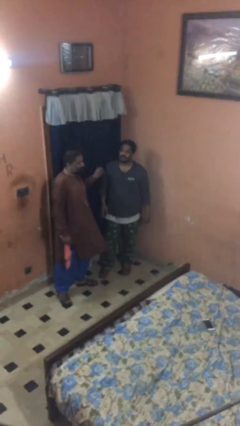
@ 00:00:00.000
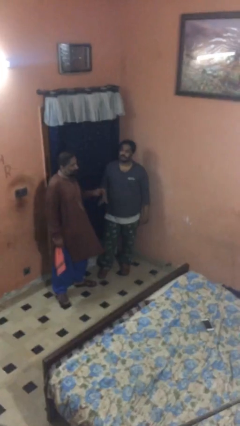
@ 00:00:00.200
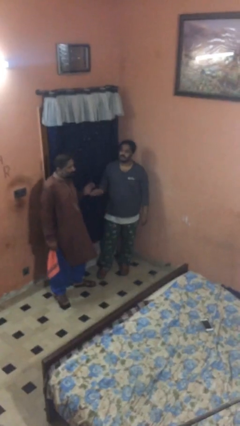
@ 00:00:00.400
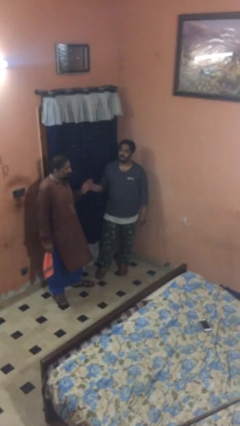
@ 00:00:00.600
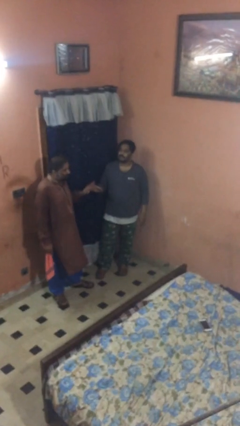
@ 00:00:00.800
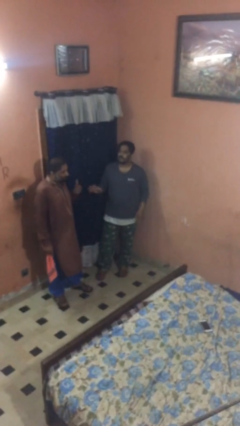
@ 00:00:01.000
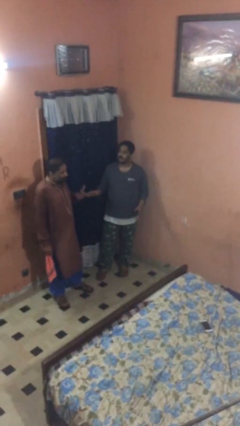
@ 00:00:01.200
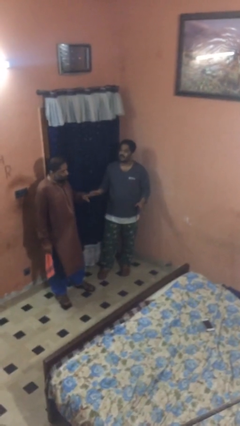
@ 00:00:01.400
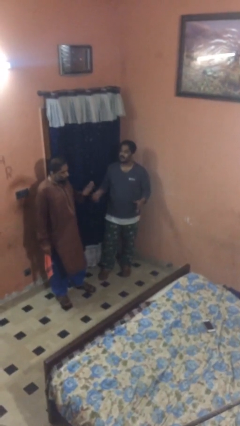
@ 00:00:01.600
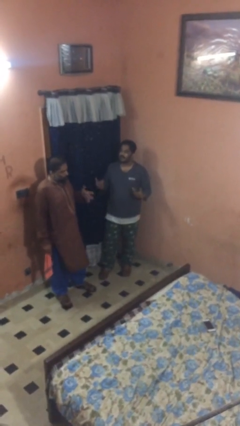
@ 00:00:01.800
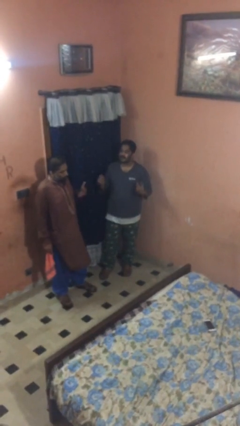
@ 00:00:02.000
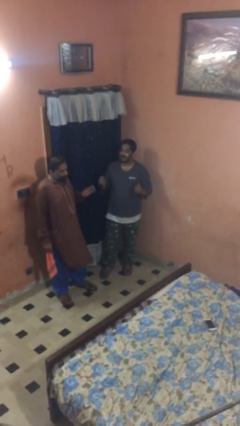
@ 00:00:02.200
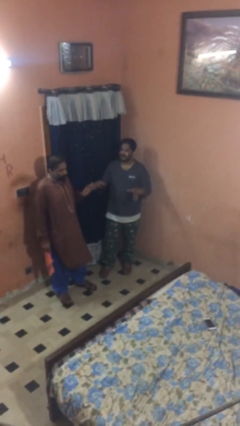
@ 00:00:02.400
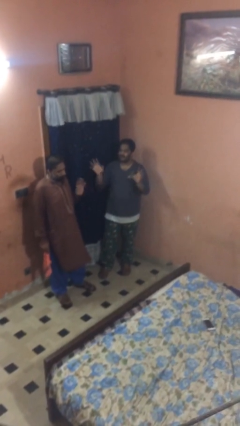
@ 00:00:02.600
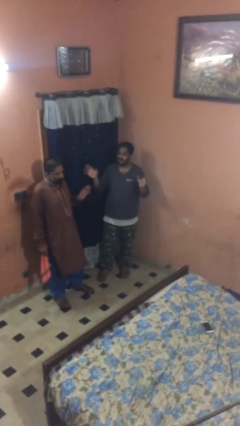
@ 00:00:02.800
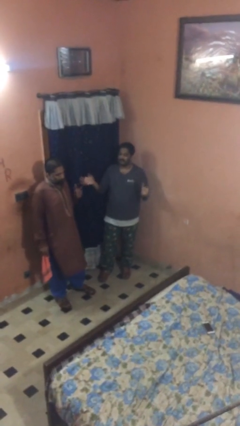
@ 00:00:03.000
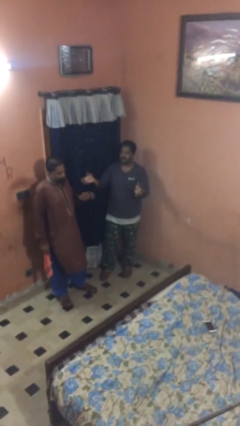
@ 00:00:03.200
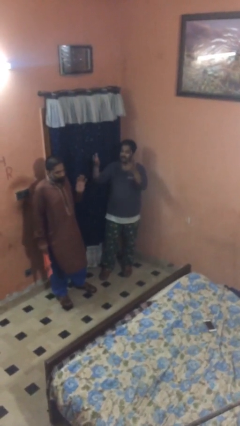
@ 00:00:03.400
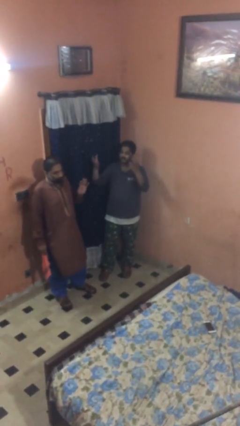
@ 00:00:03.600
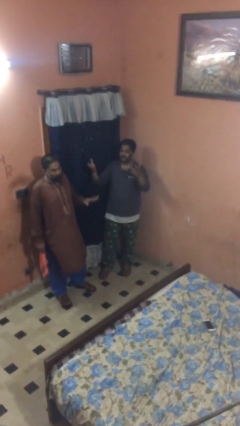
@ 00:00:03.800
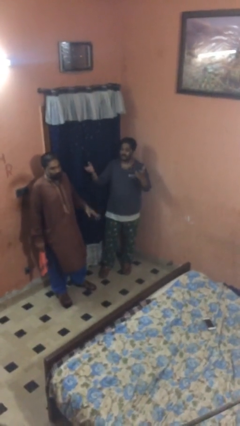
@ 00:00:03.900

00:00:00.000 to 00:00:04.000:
person talks to person

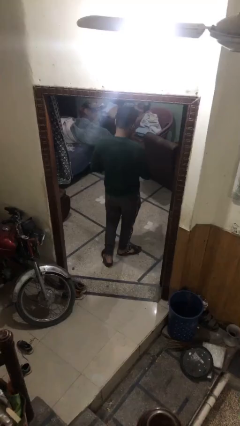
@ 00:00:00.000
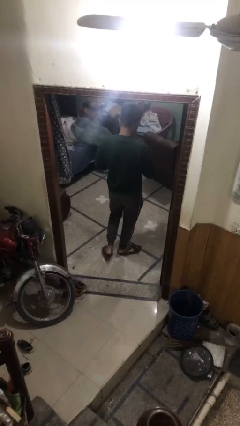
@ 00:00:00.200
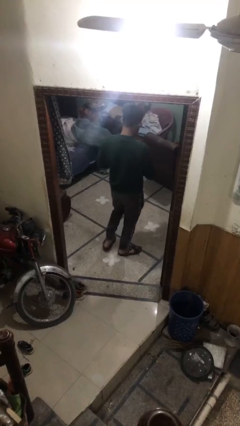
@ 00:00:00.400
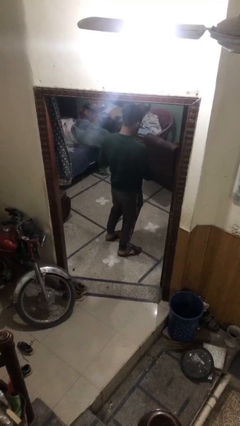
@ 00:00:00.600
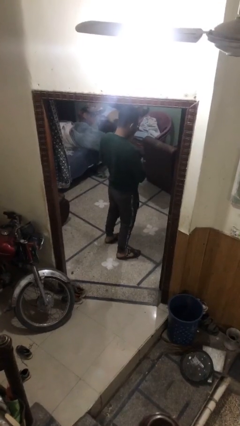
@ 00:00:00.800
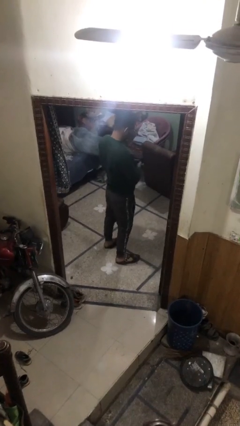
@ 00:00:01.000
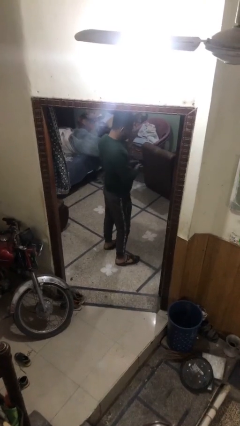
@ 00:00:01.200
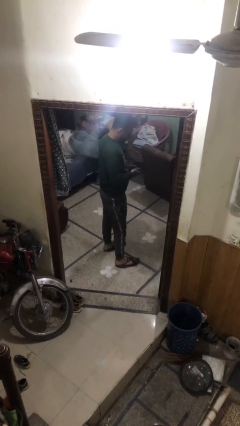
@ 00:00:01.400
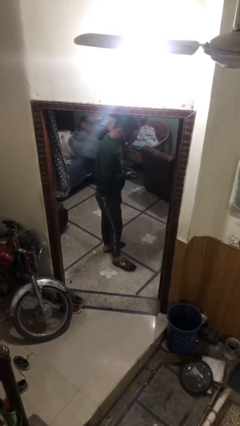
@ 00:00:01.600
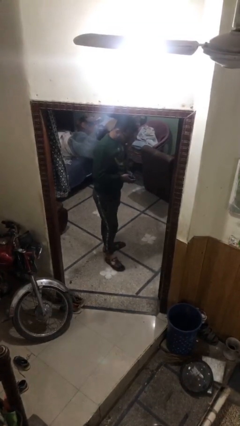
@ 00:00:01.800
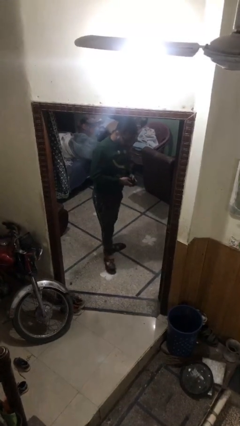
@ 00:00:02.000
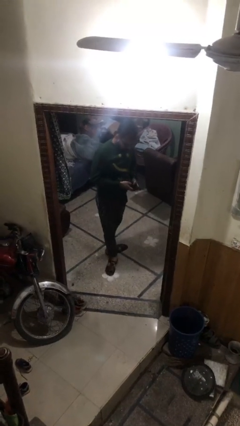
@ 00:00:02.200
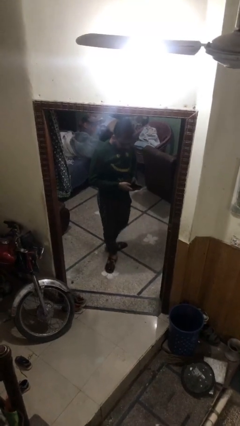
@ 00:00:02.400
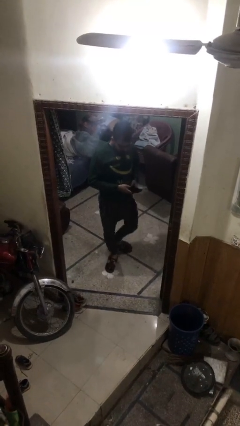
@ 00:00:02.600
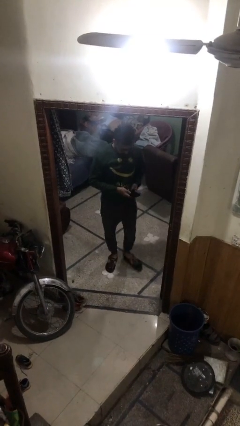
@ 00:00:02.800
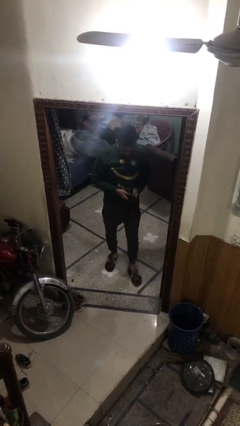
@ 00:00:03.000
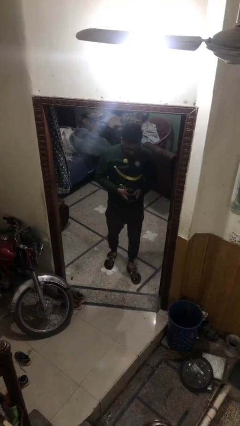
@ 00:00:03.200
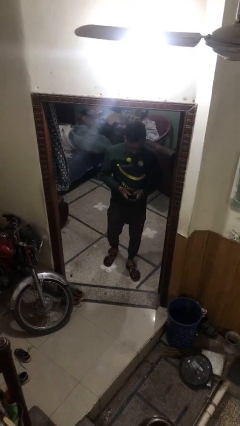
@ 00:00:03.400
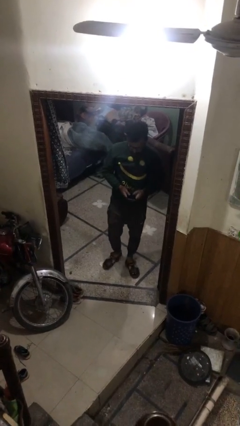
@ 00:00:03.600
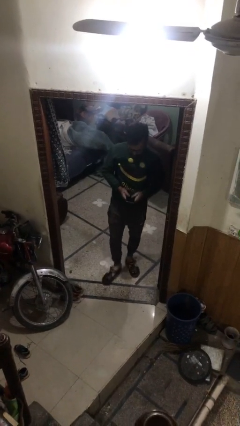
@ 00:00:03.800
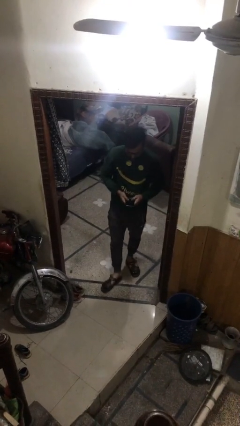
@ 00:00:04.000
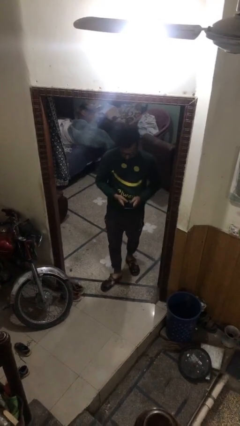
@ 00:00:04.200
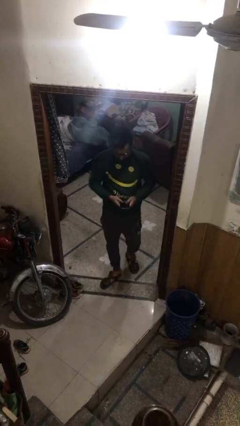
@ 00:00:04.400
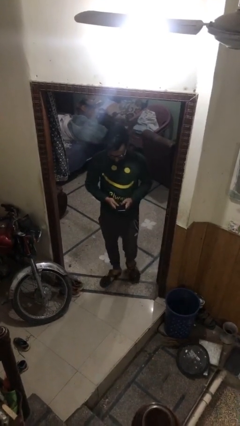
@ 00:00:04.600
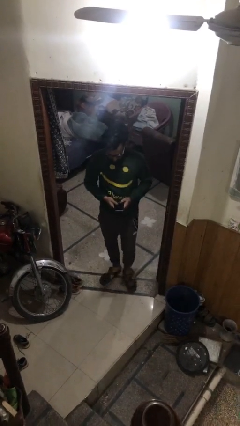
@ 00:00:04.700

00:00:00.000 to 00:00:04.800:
person enters scene through structure

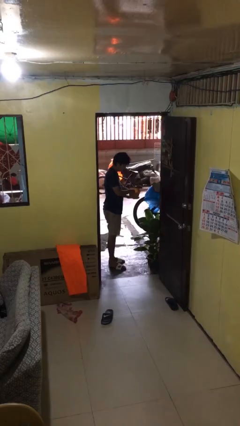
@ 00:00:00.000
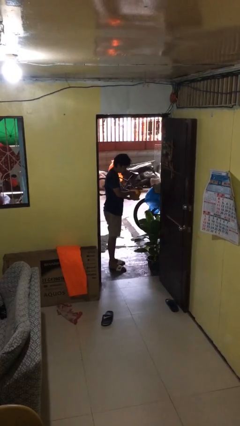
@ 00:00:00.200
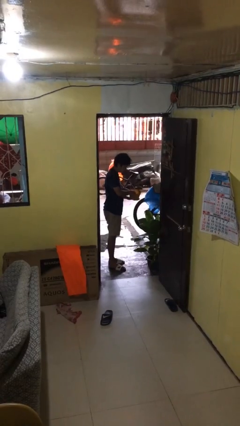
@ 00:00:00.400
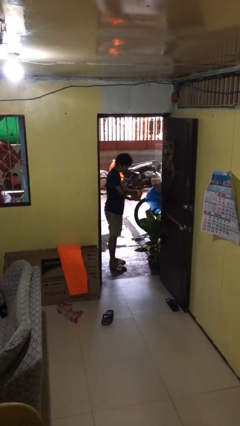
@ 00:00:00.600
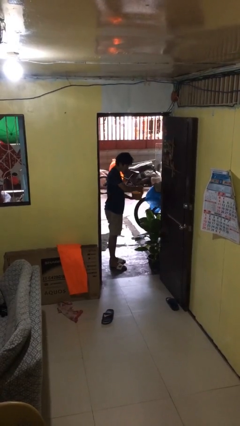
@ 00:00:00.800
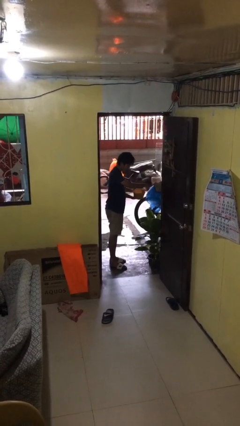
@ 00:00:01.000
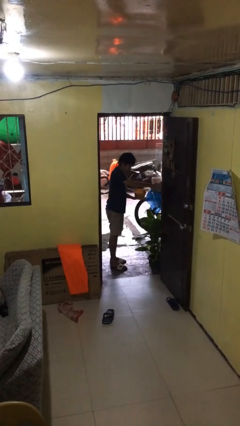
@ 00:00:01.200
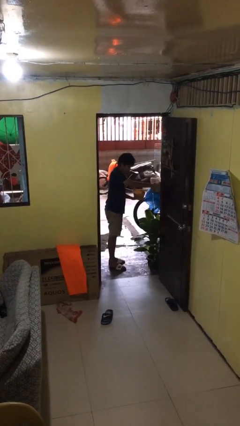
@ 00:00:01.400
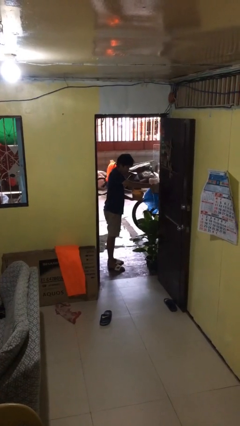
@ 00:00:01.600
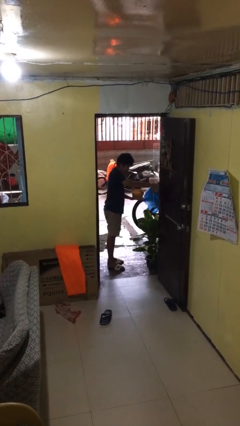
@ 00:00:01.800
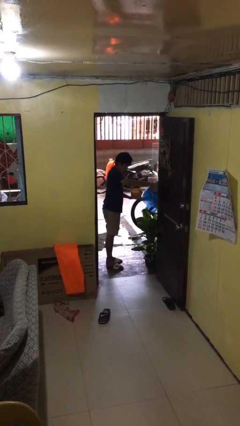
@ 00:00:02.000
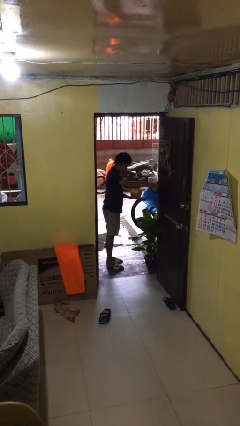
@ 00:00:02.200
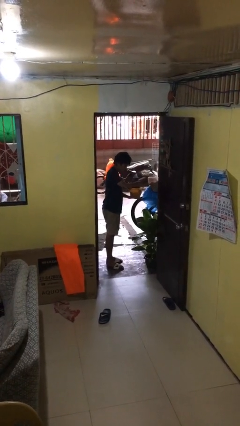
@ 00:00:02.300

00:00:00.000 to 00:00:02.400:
person waters houseplant

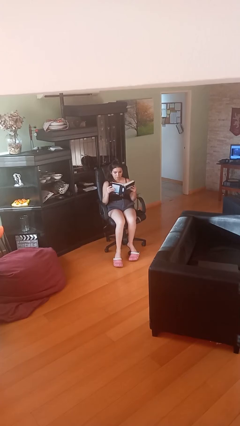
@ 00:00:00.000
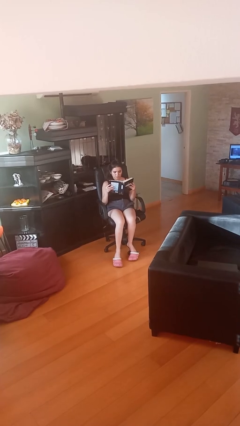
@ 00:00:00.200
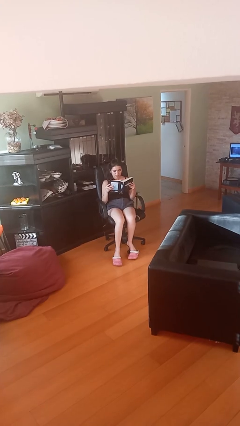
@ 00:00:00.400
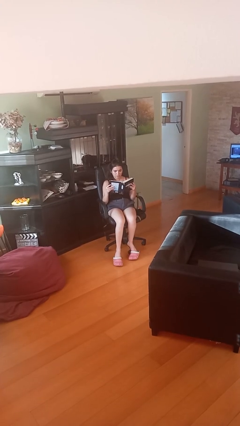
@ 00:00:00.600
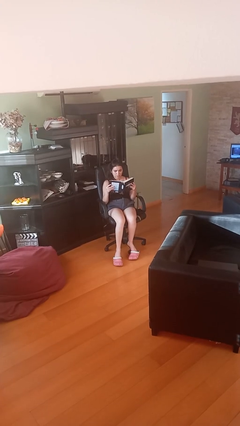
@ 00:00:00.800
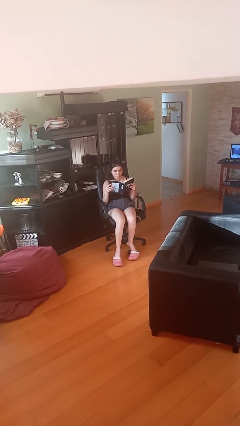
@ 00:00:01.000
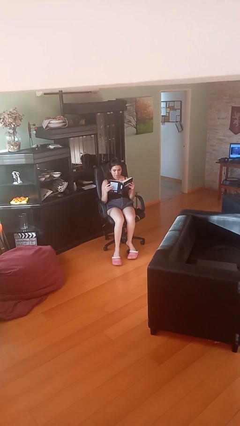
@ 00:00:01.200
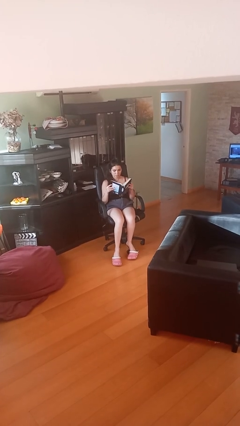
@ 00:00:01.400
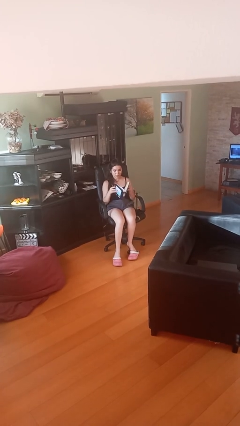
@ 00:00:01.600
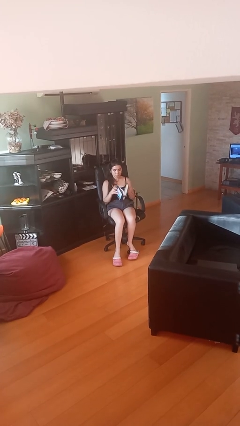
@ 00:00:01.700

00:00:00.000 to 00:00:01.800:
person reads document

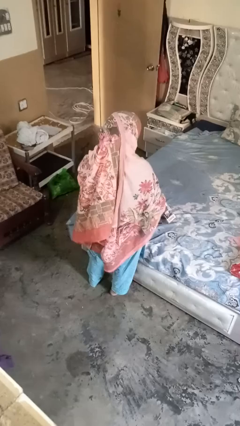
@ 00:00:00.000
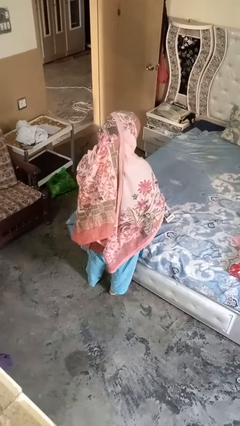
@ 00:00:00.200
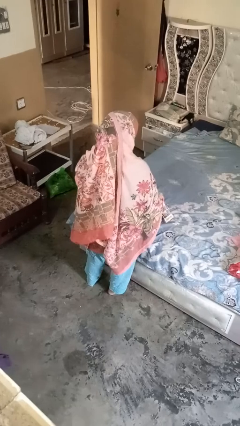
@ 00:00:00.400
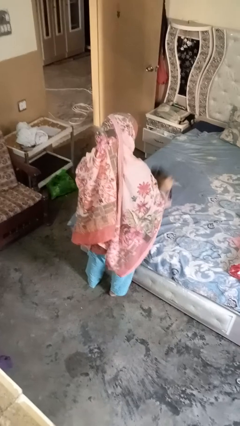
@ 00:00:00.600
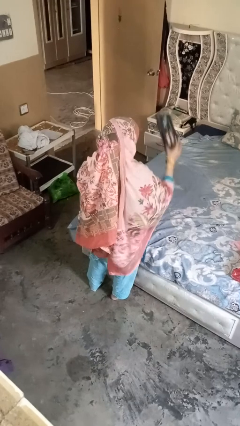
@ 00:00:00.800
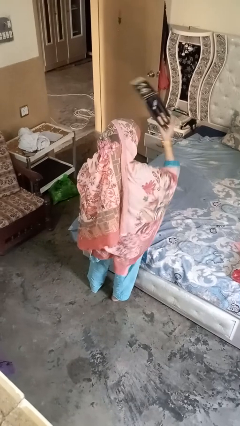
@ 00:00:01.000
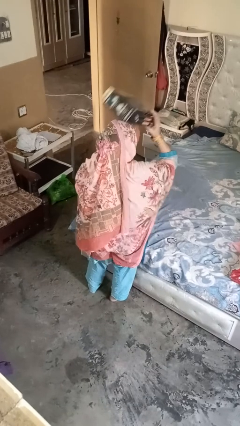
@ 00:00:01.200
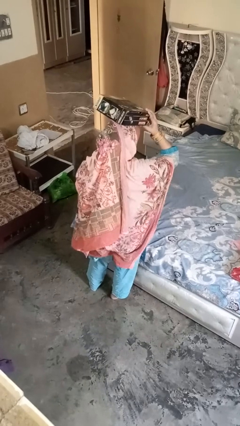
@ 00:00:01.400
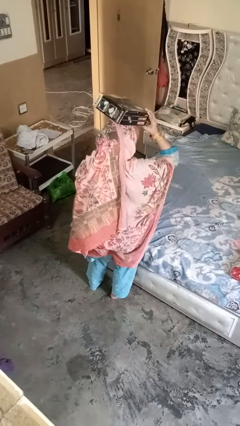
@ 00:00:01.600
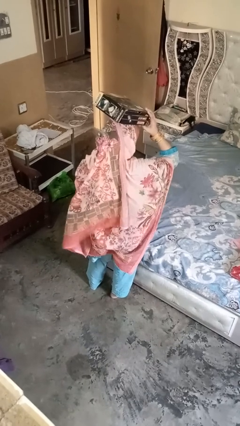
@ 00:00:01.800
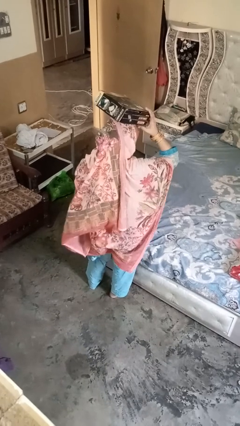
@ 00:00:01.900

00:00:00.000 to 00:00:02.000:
person holds object above head

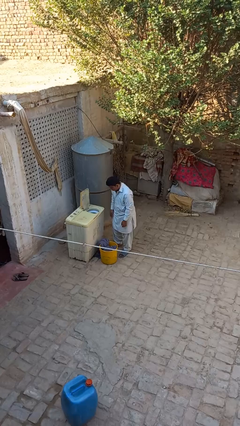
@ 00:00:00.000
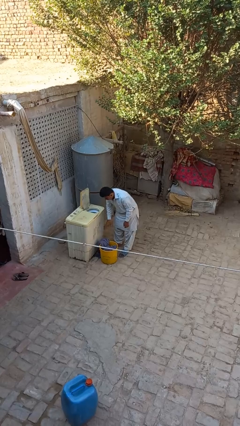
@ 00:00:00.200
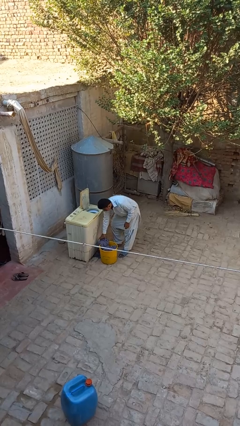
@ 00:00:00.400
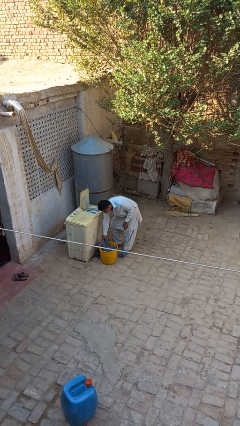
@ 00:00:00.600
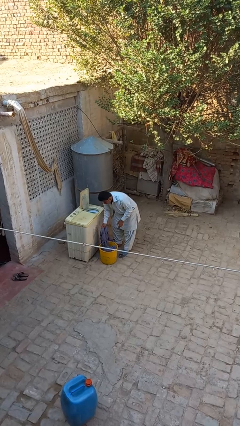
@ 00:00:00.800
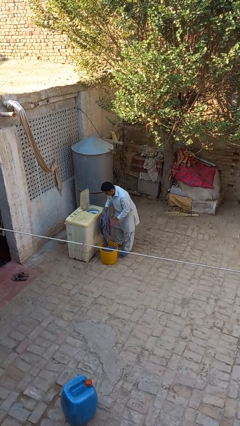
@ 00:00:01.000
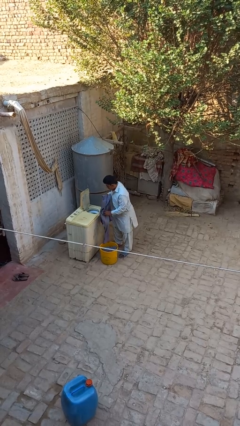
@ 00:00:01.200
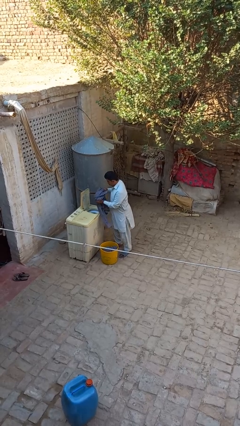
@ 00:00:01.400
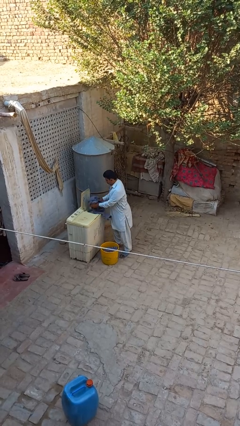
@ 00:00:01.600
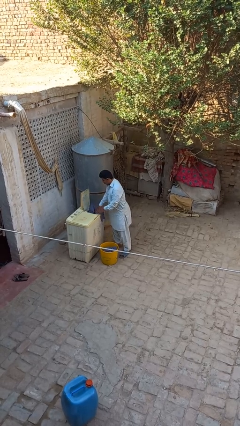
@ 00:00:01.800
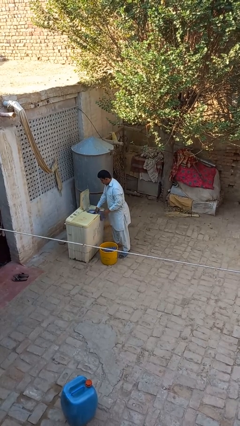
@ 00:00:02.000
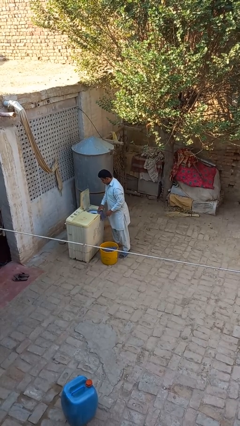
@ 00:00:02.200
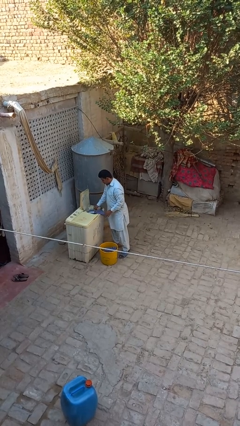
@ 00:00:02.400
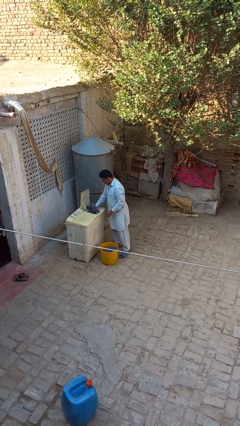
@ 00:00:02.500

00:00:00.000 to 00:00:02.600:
person loads dryer
